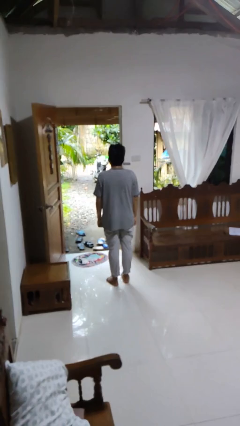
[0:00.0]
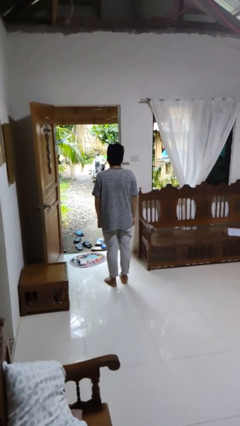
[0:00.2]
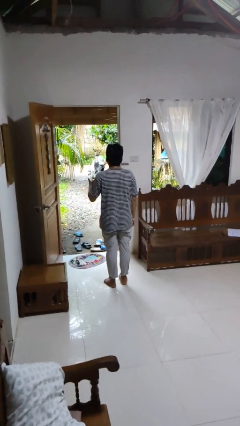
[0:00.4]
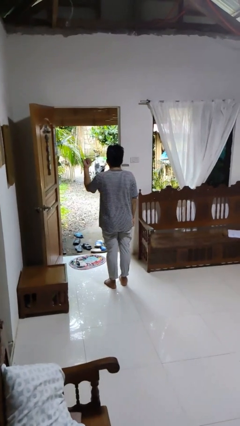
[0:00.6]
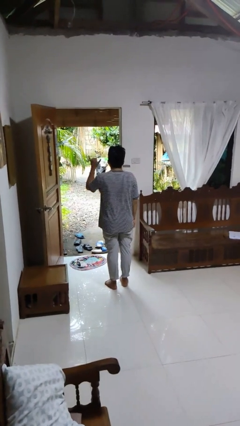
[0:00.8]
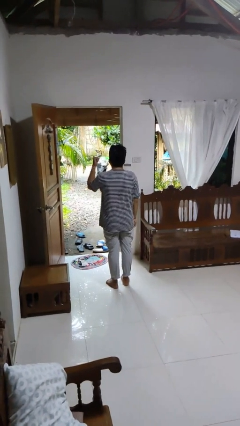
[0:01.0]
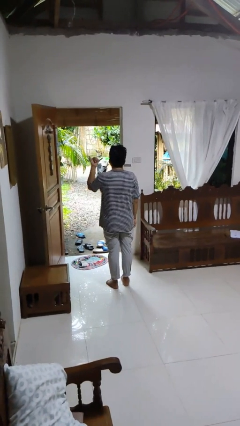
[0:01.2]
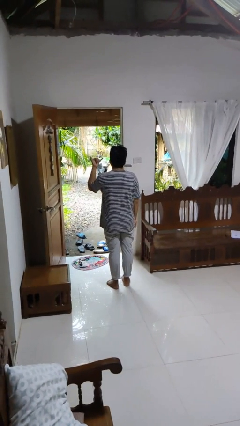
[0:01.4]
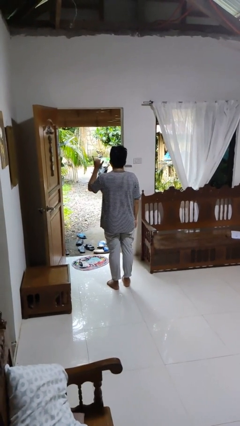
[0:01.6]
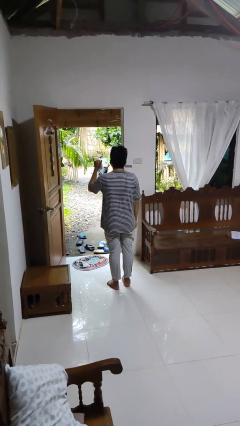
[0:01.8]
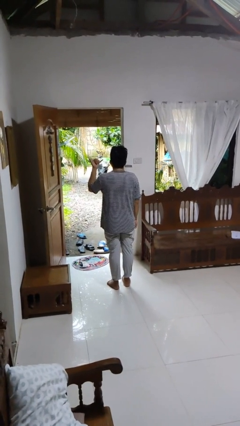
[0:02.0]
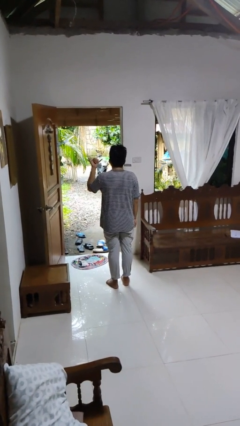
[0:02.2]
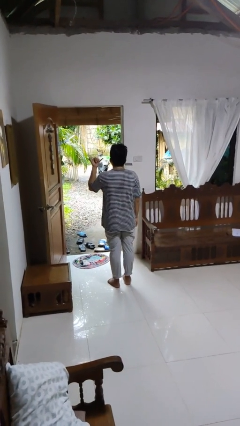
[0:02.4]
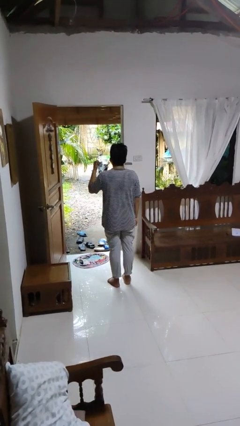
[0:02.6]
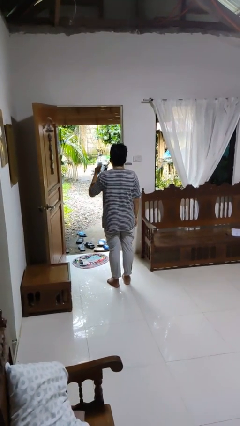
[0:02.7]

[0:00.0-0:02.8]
person gestures hang loose

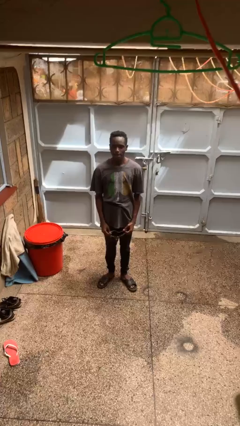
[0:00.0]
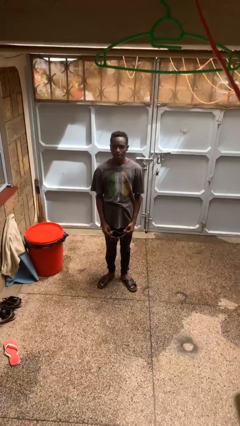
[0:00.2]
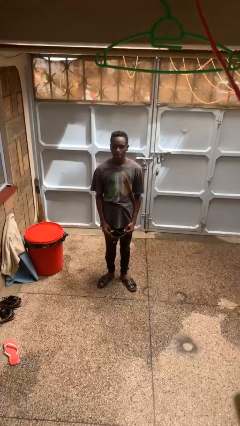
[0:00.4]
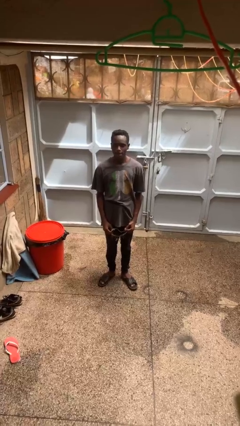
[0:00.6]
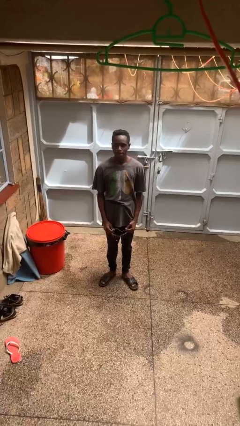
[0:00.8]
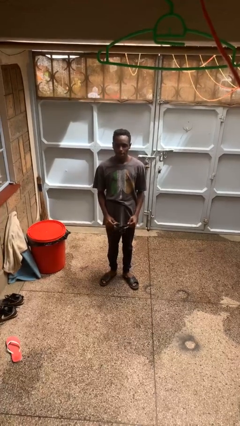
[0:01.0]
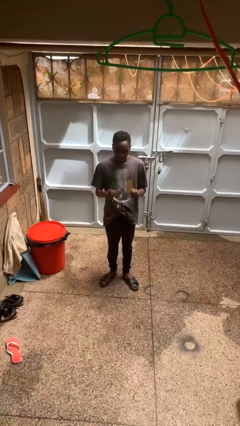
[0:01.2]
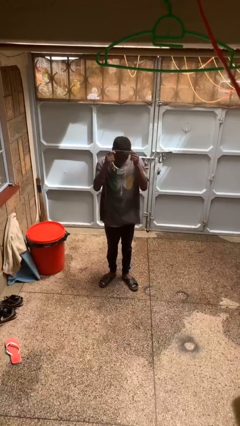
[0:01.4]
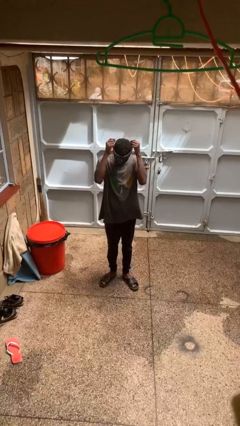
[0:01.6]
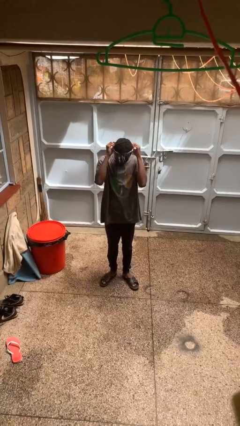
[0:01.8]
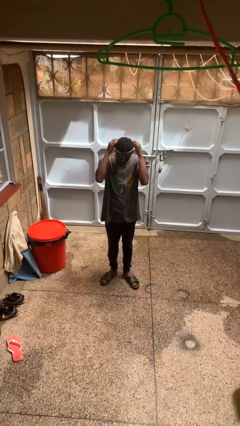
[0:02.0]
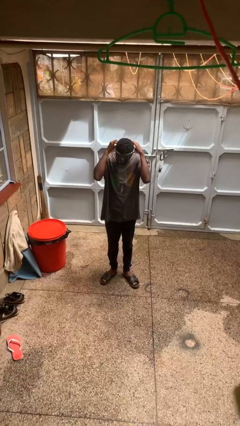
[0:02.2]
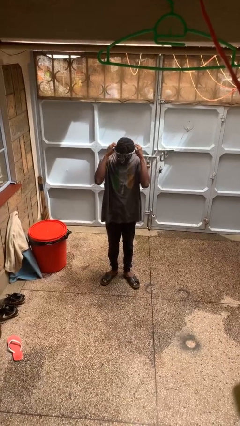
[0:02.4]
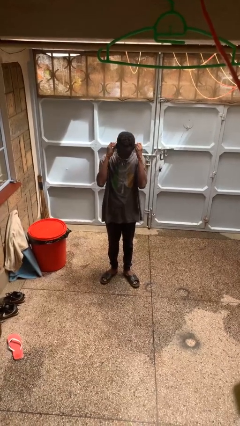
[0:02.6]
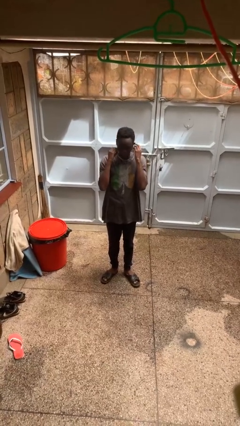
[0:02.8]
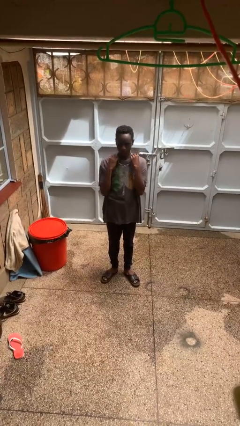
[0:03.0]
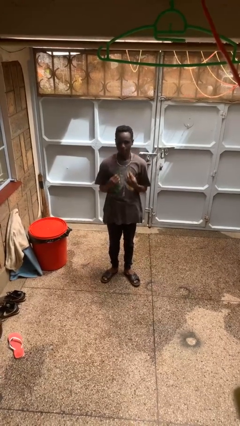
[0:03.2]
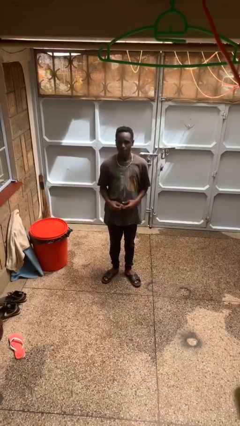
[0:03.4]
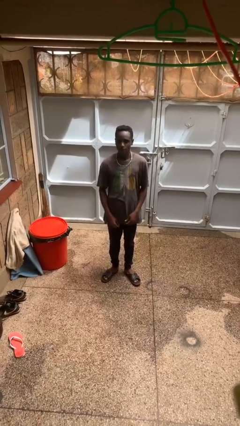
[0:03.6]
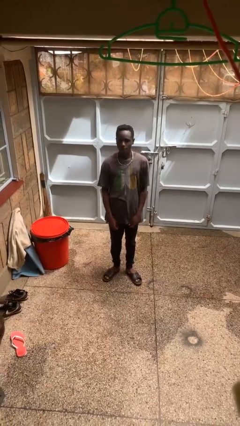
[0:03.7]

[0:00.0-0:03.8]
person puts on necklace

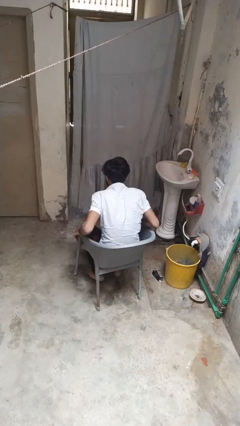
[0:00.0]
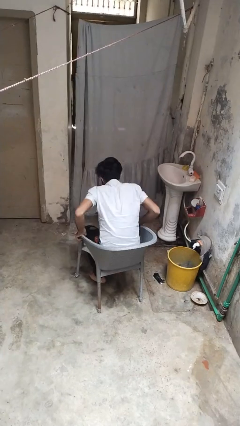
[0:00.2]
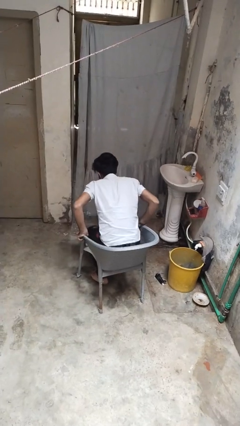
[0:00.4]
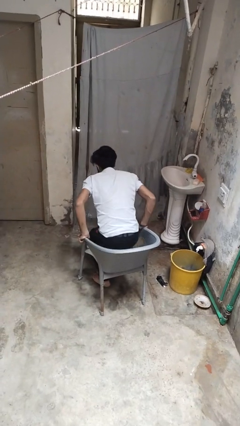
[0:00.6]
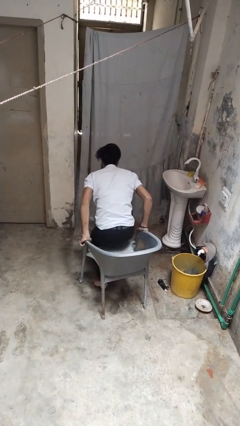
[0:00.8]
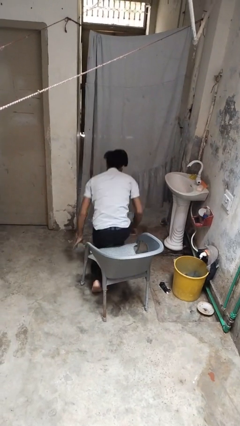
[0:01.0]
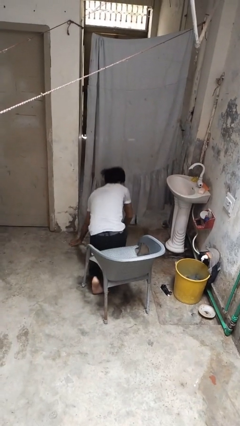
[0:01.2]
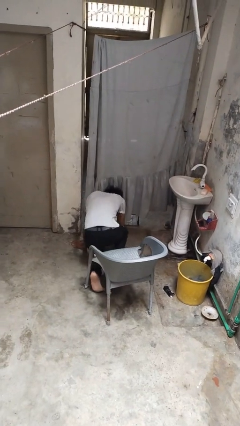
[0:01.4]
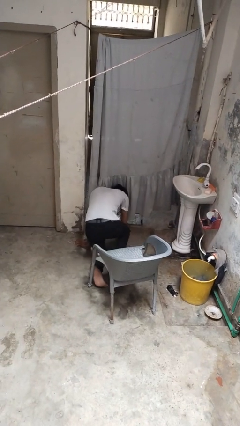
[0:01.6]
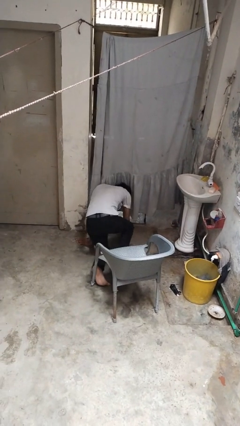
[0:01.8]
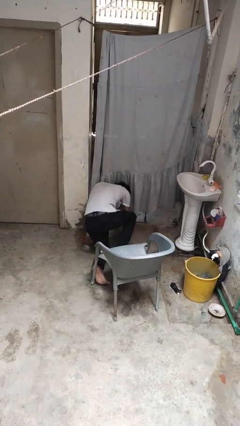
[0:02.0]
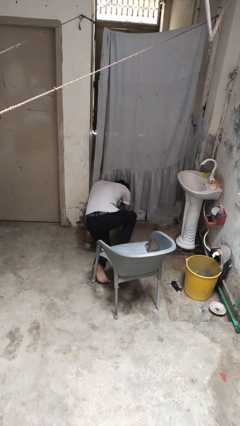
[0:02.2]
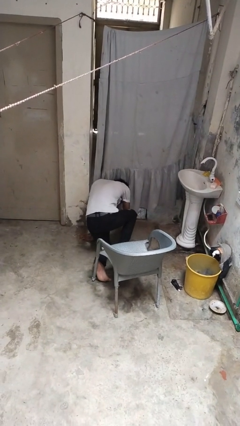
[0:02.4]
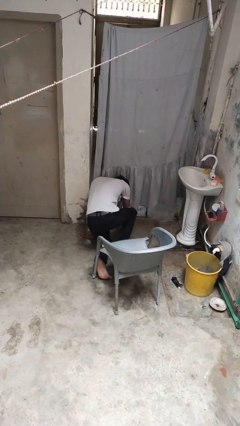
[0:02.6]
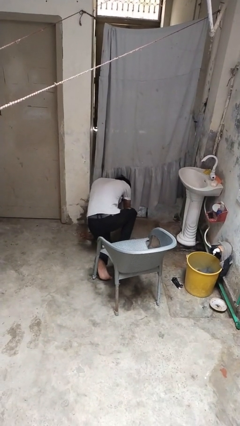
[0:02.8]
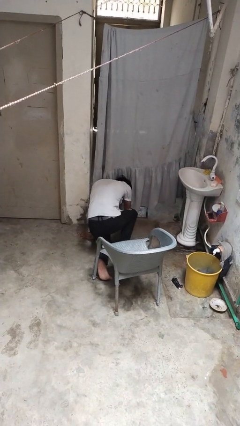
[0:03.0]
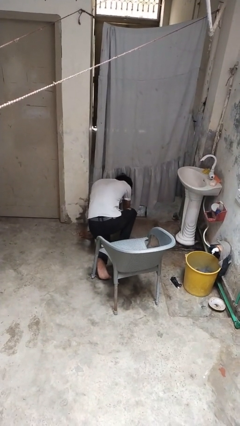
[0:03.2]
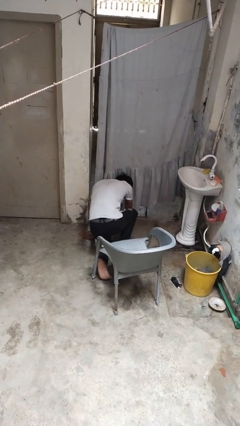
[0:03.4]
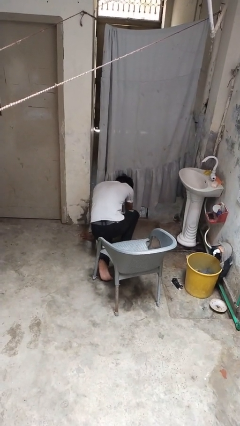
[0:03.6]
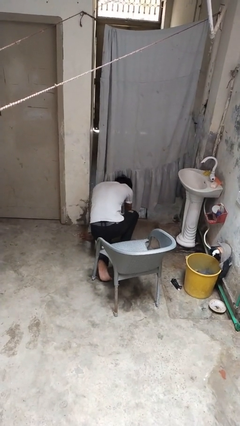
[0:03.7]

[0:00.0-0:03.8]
person falls from chair

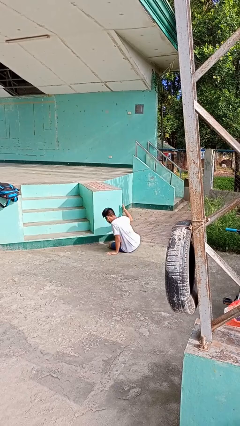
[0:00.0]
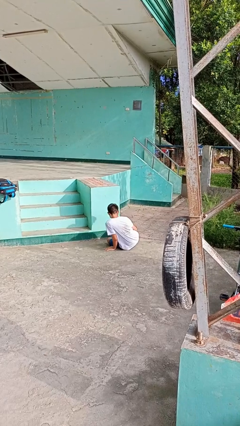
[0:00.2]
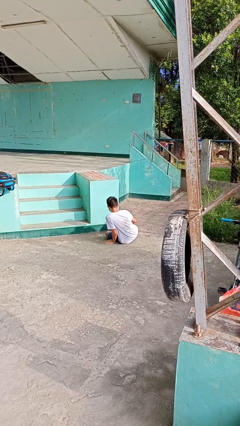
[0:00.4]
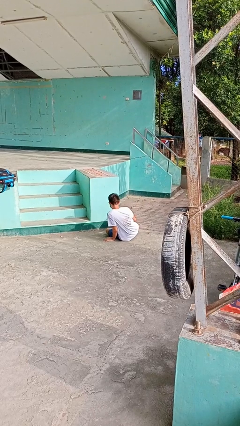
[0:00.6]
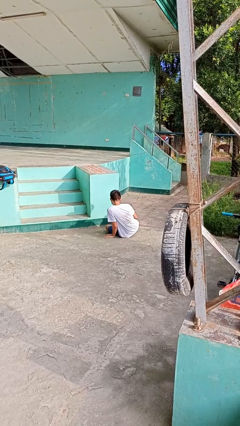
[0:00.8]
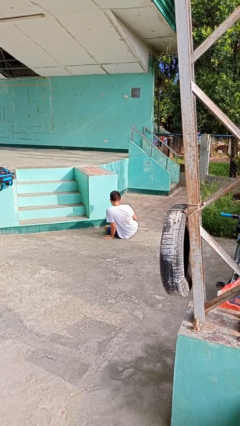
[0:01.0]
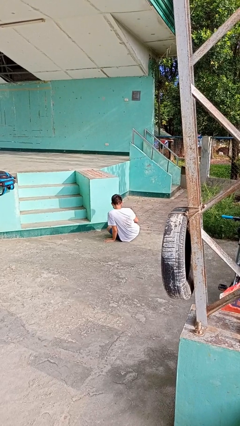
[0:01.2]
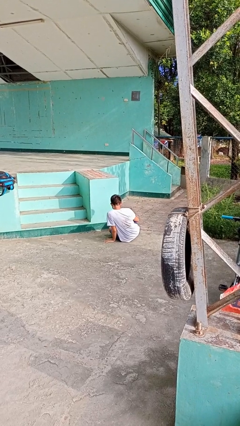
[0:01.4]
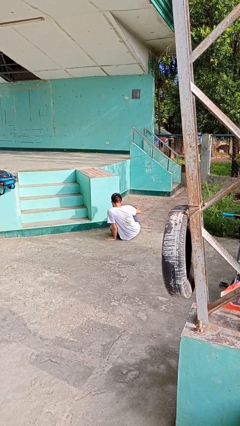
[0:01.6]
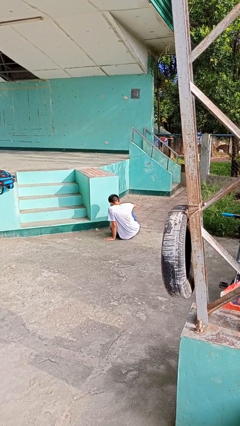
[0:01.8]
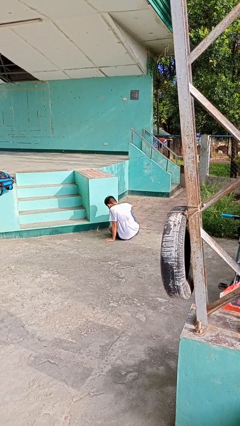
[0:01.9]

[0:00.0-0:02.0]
person lies down on floor

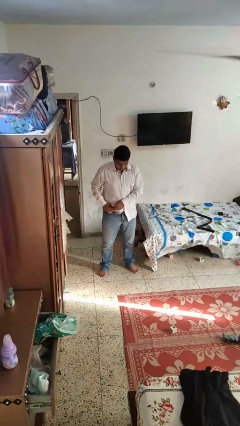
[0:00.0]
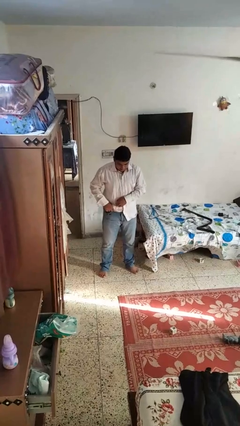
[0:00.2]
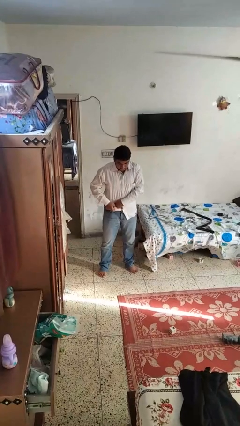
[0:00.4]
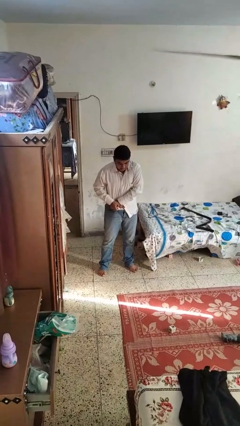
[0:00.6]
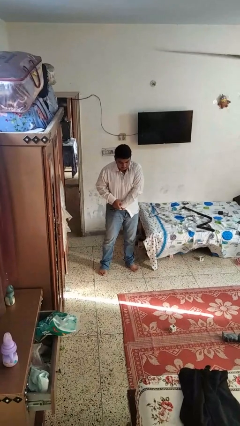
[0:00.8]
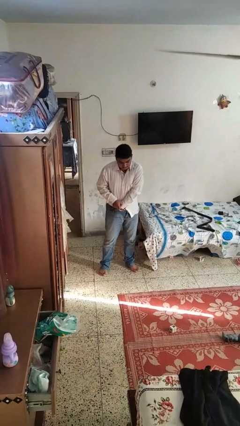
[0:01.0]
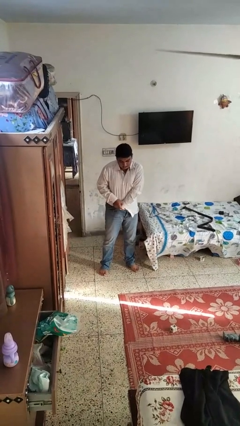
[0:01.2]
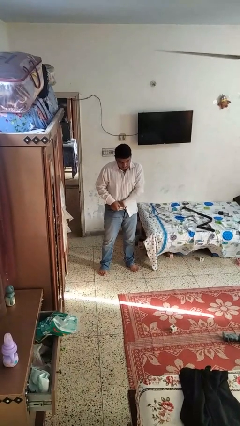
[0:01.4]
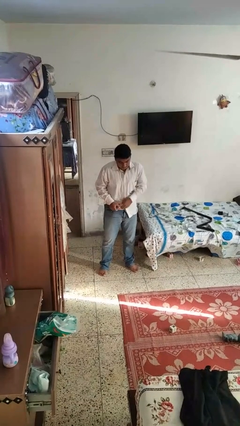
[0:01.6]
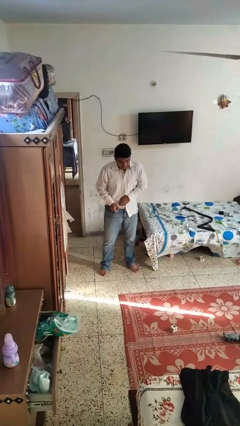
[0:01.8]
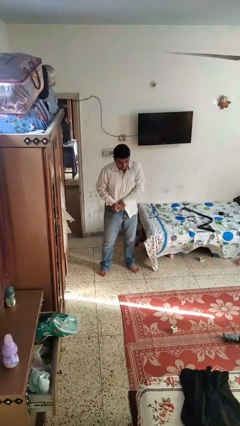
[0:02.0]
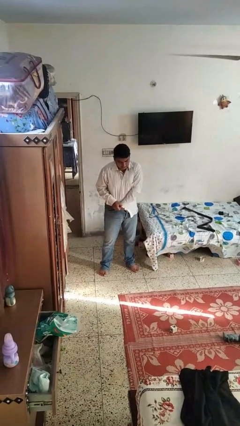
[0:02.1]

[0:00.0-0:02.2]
person tucks in shirt

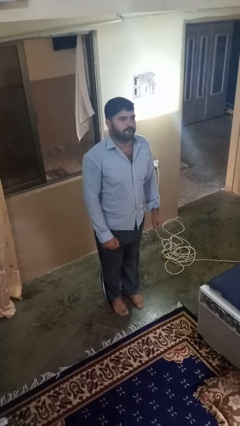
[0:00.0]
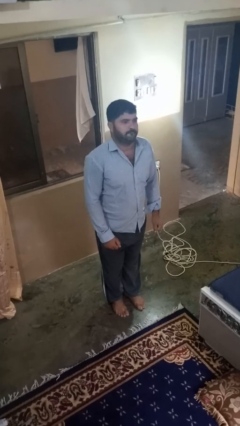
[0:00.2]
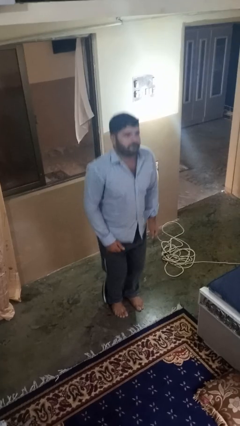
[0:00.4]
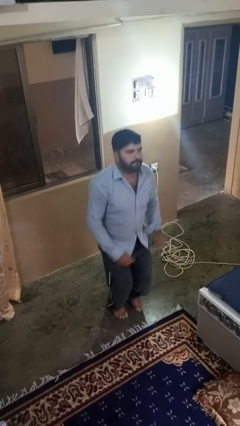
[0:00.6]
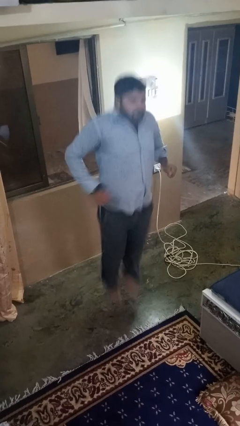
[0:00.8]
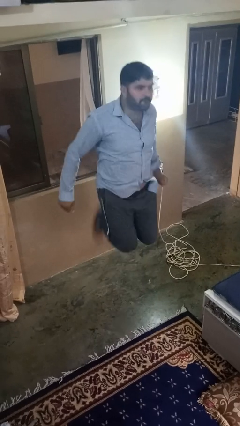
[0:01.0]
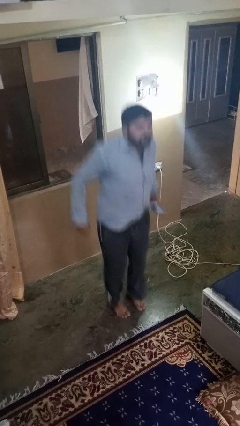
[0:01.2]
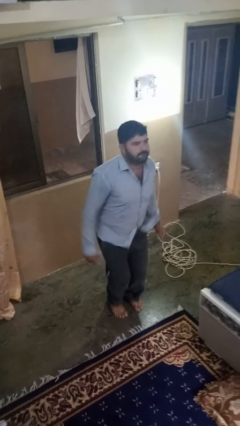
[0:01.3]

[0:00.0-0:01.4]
person jumps

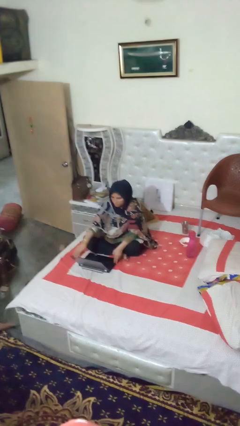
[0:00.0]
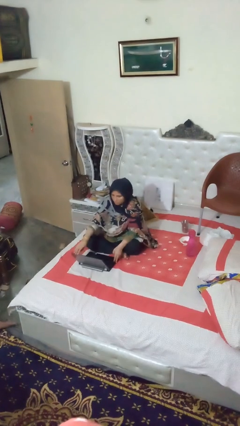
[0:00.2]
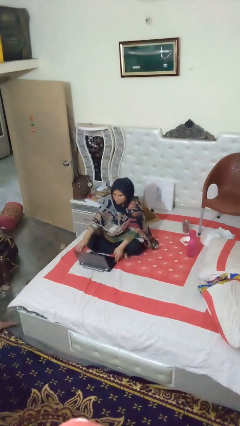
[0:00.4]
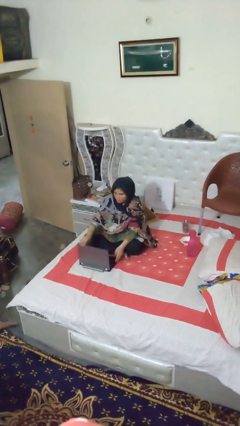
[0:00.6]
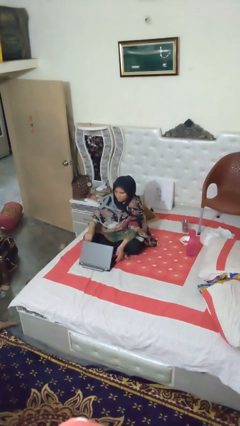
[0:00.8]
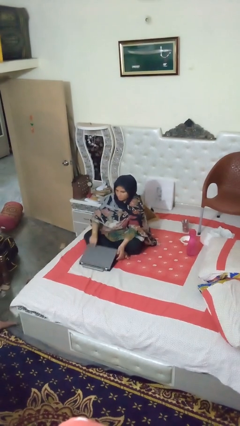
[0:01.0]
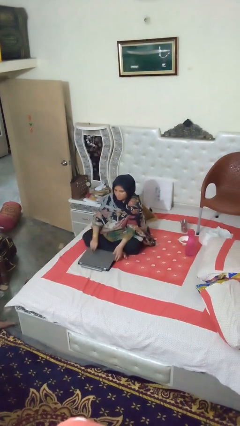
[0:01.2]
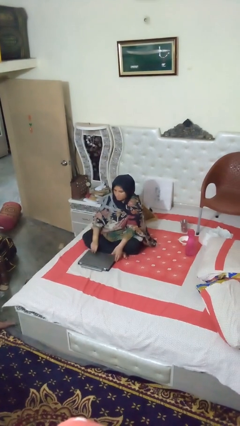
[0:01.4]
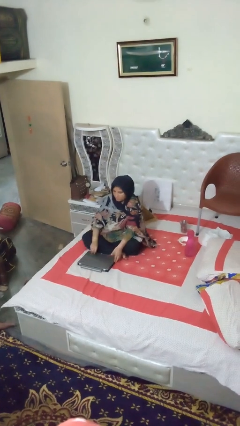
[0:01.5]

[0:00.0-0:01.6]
person closes laptop
